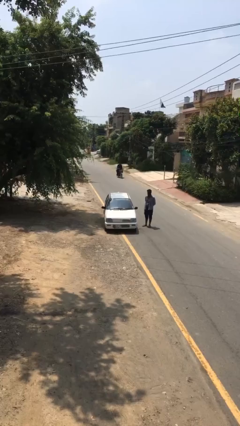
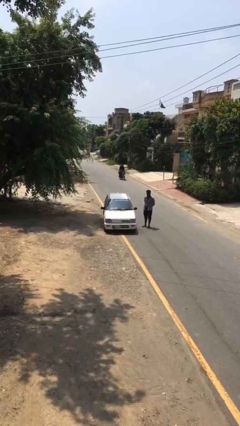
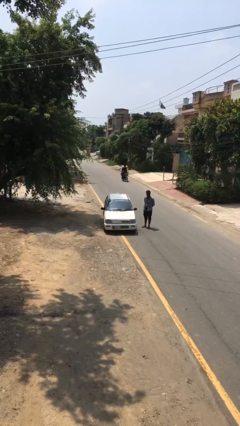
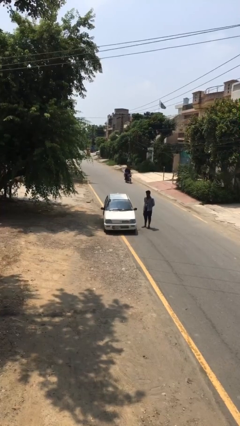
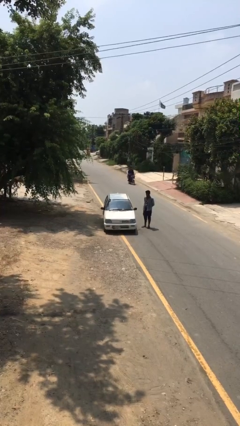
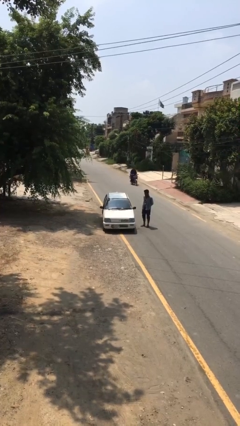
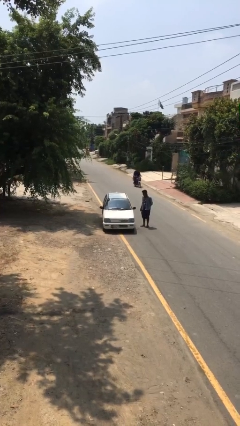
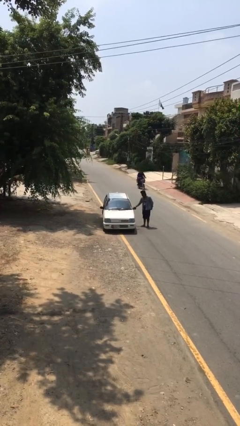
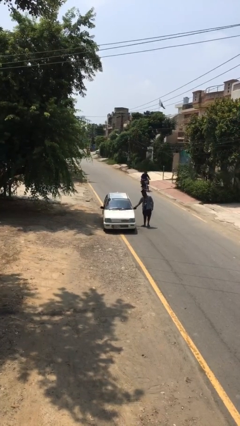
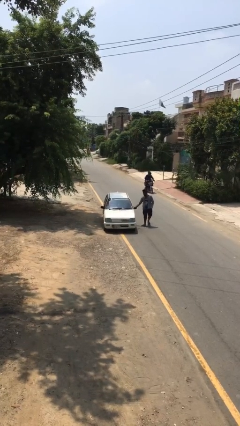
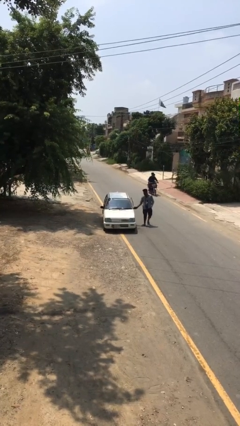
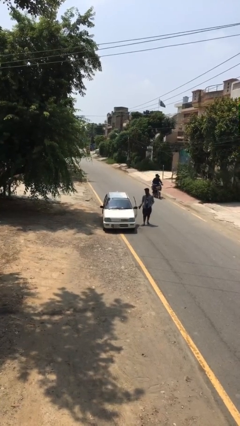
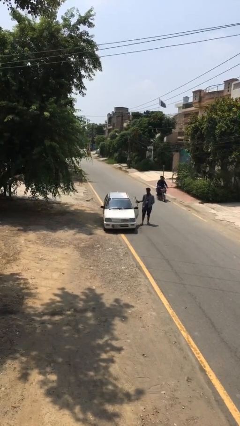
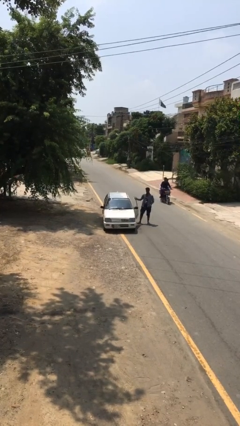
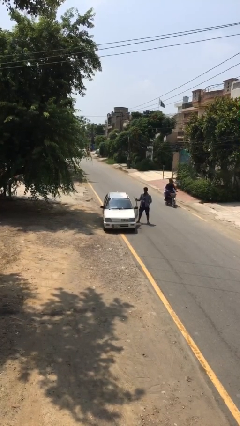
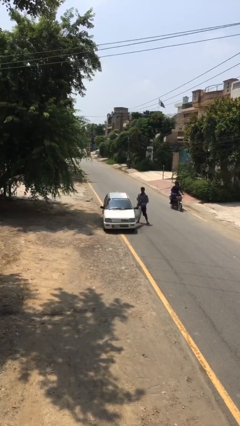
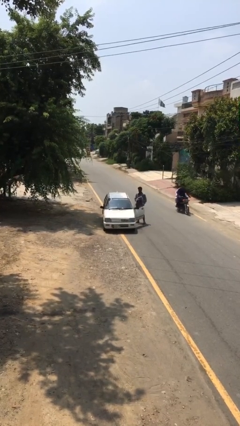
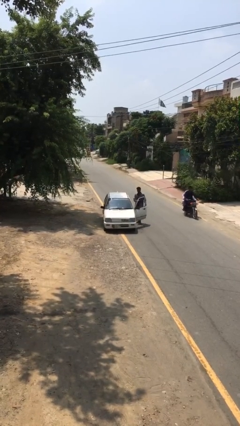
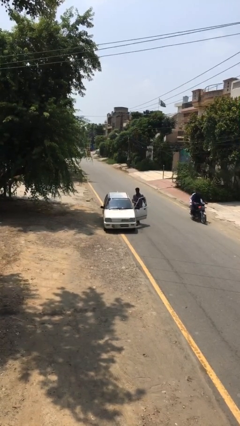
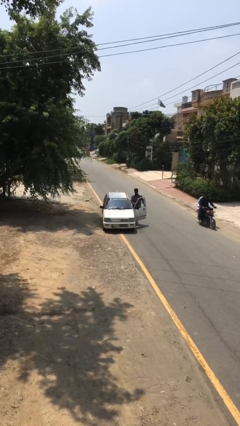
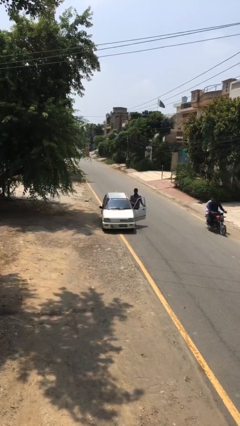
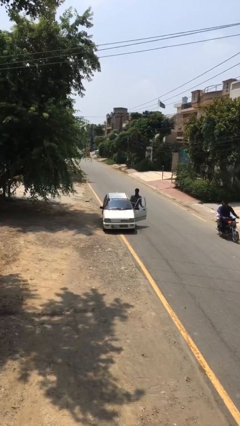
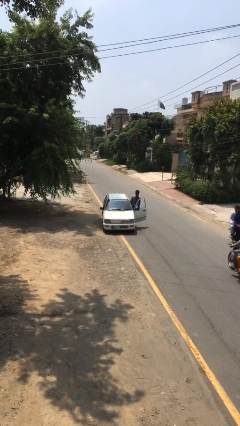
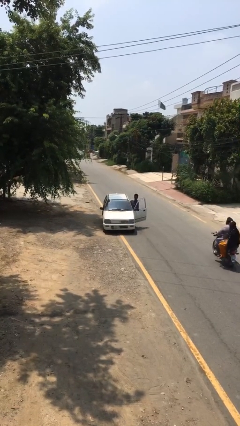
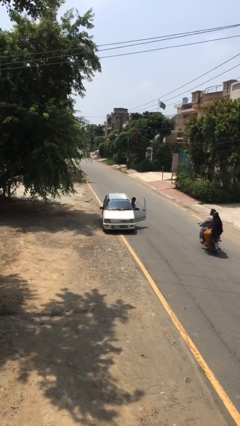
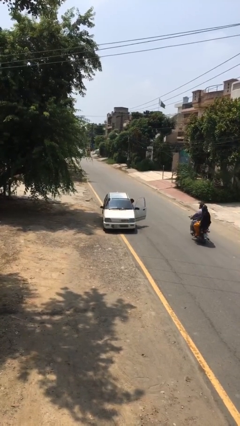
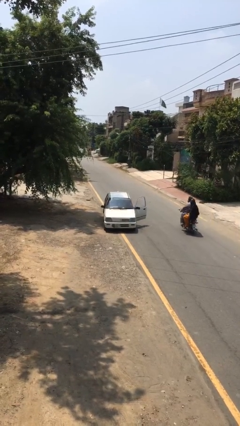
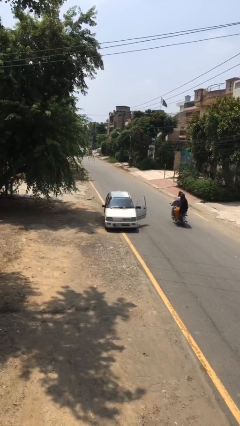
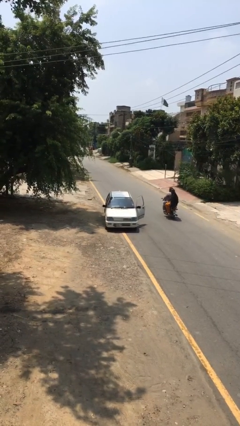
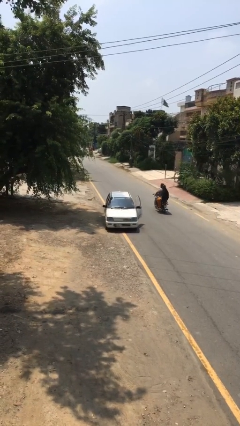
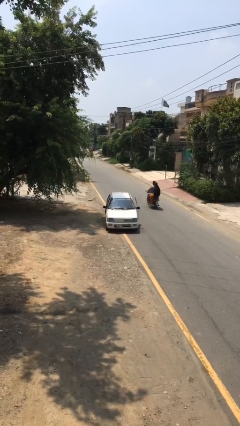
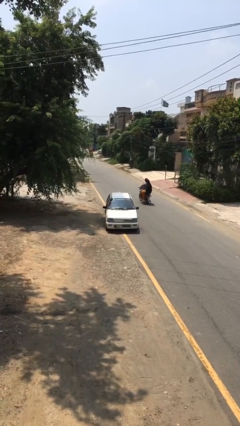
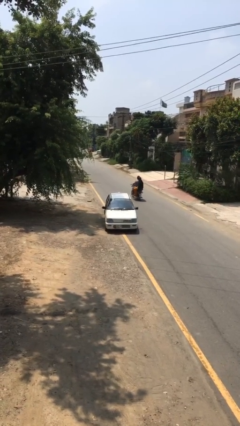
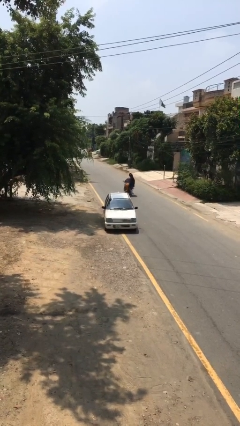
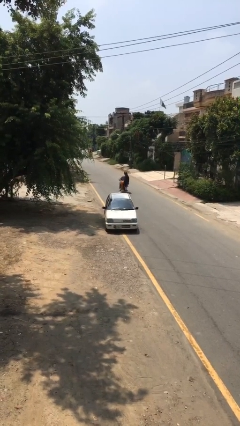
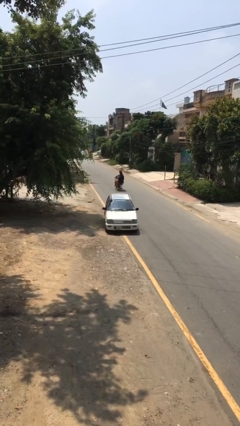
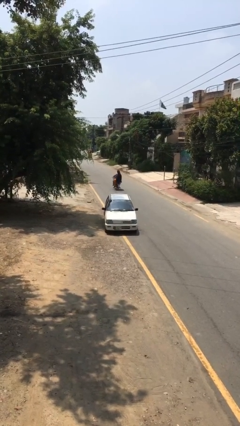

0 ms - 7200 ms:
car picks up person

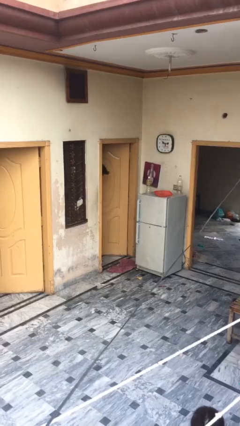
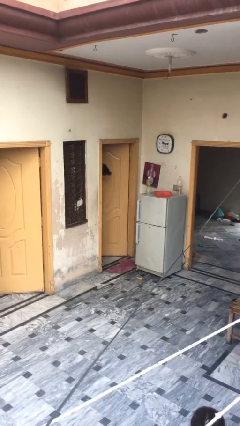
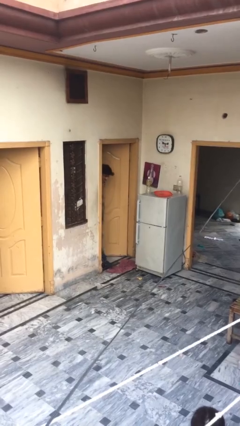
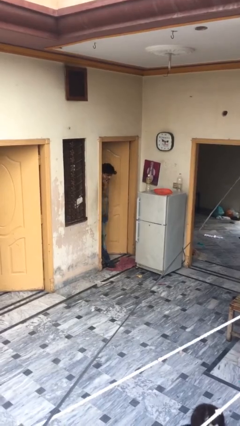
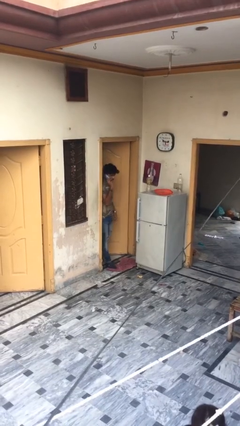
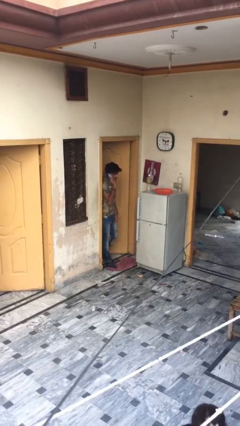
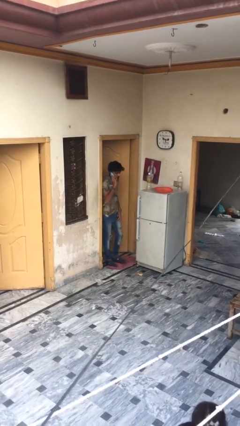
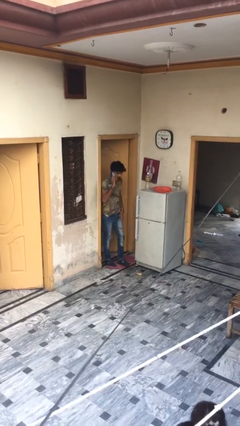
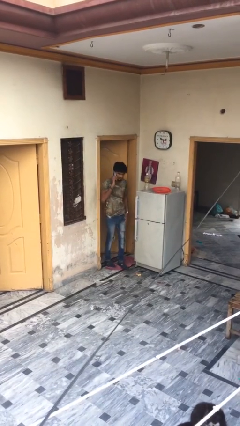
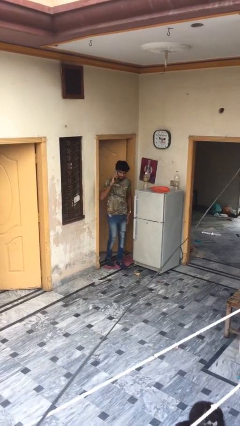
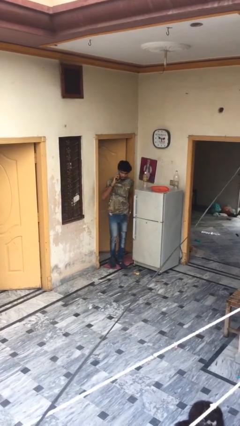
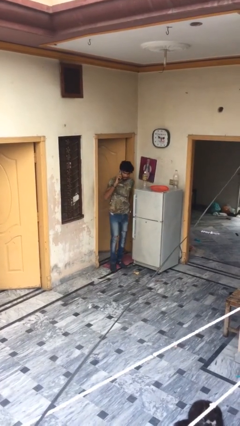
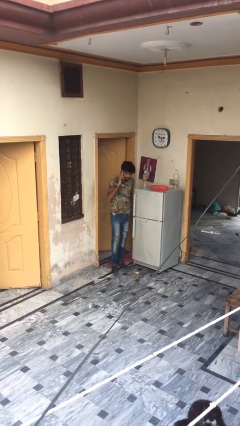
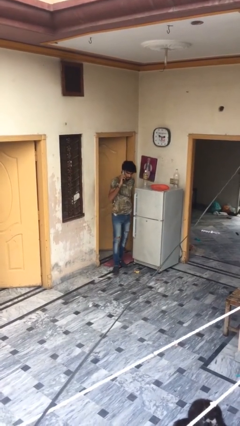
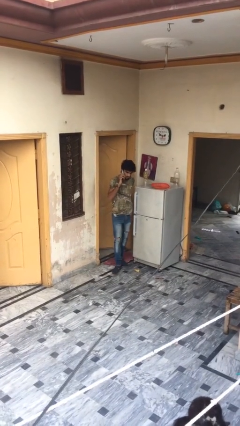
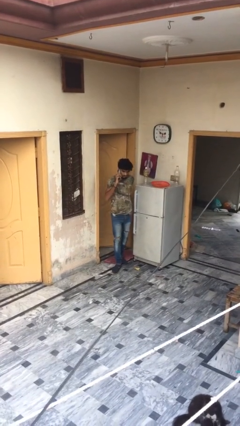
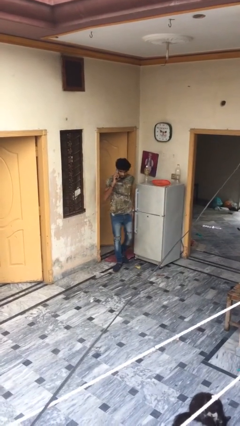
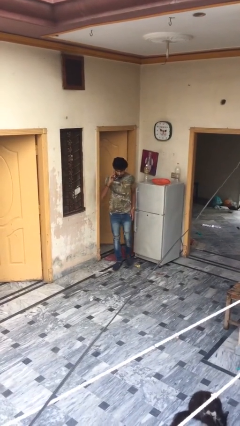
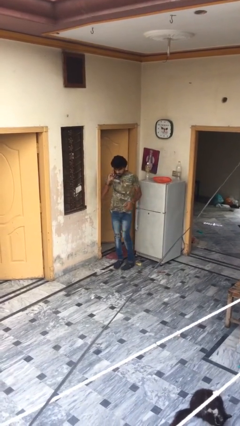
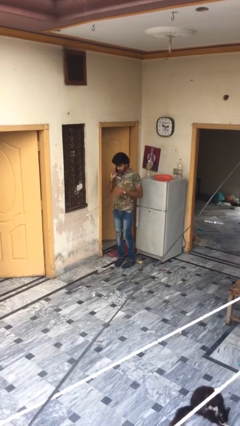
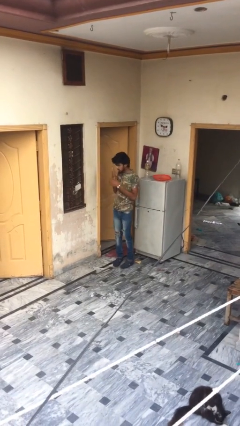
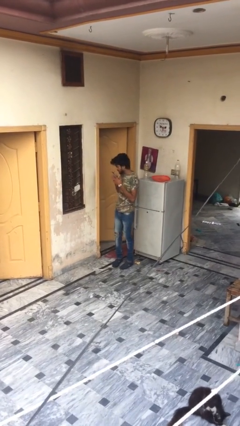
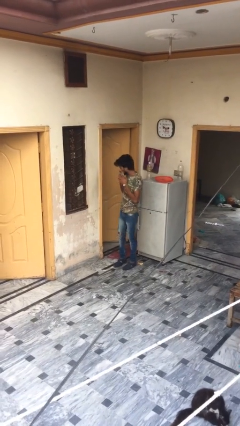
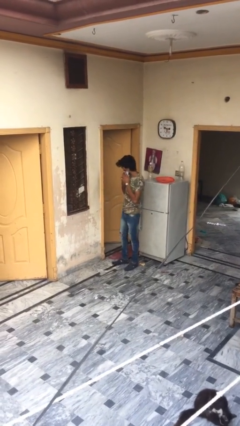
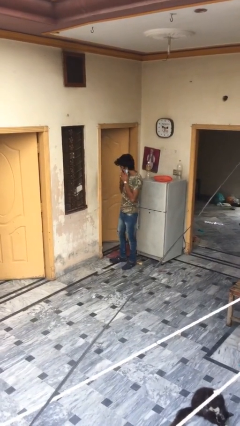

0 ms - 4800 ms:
person enters scene through structure

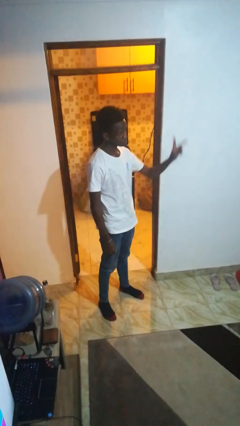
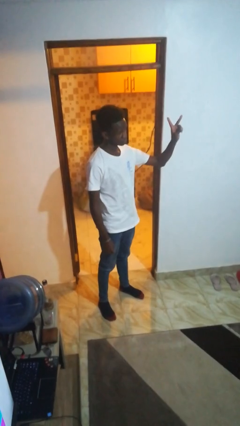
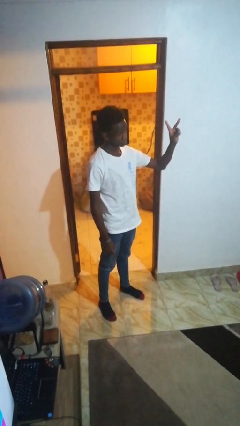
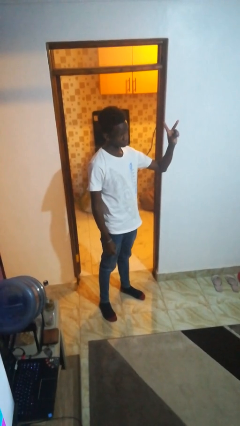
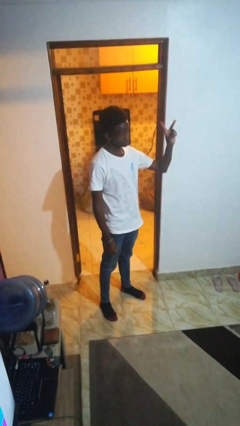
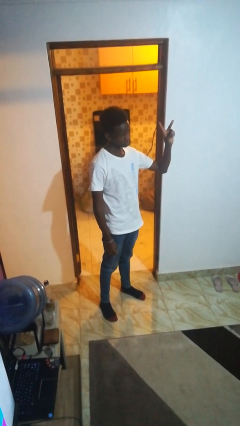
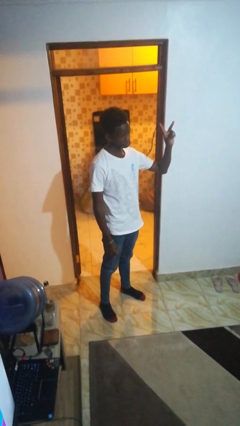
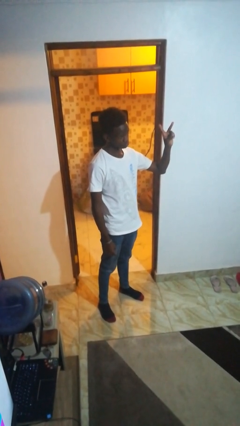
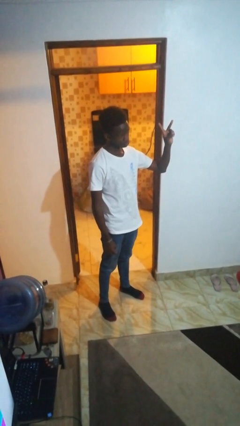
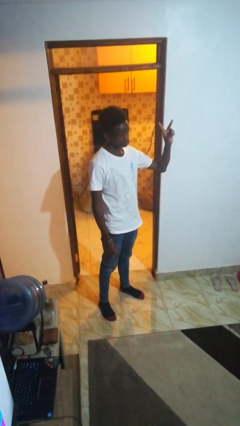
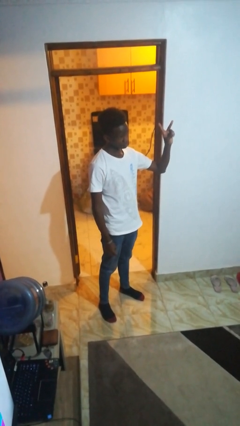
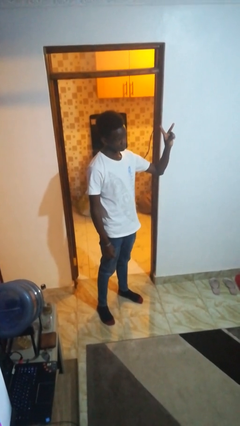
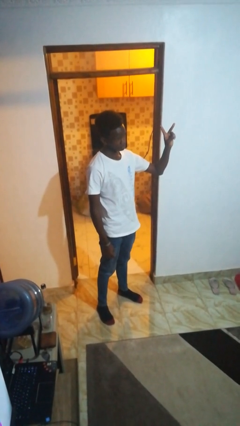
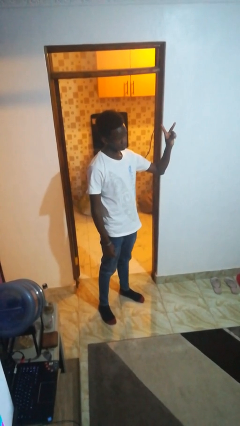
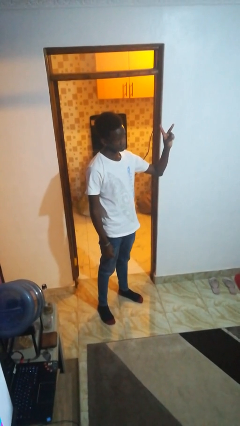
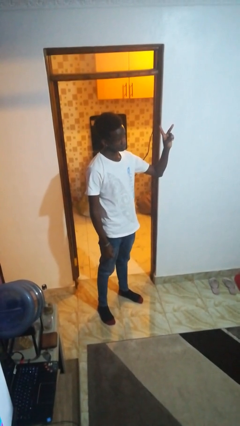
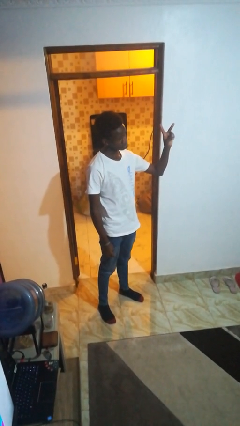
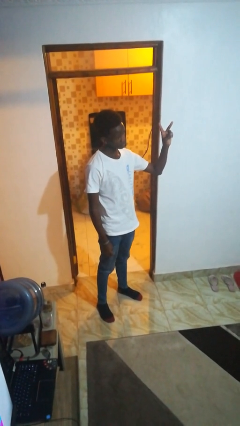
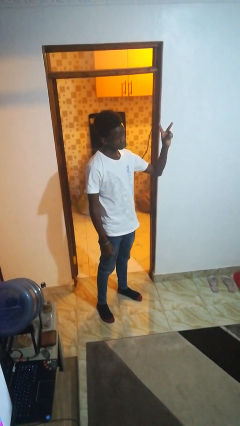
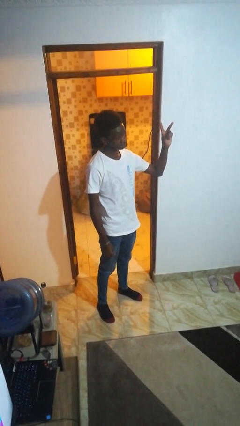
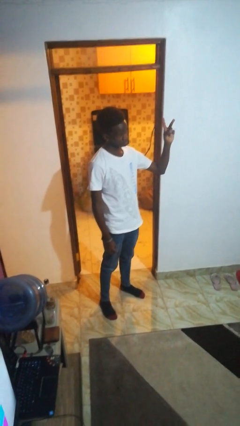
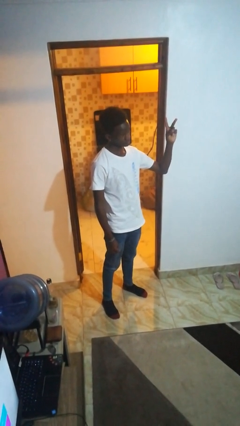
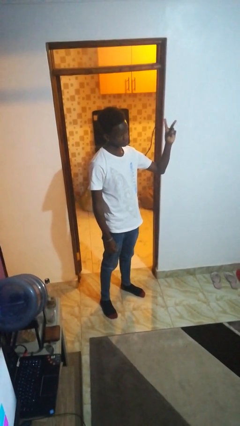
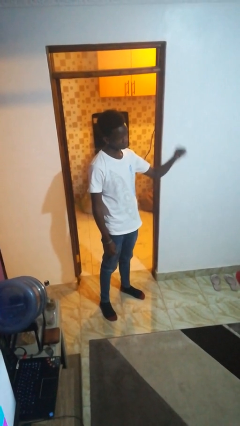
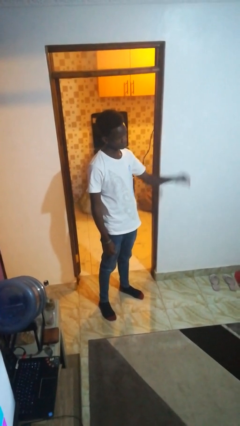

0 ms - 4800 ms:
person gestures peace

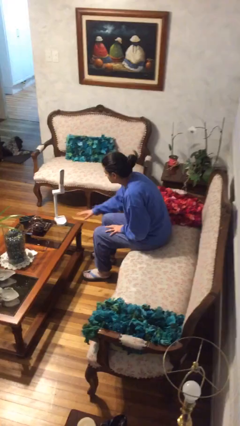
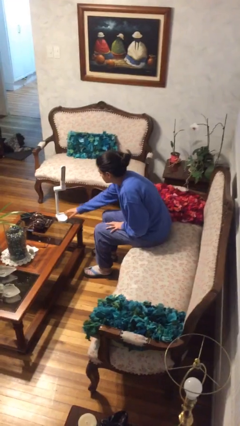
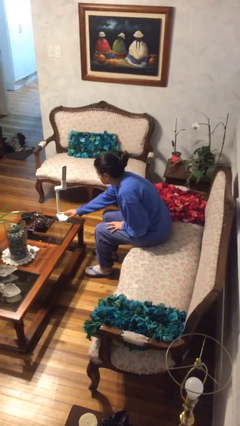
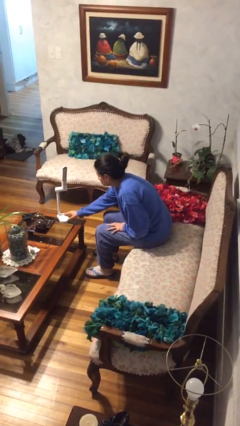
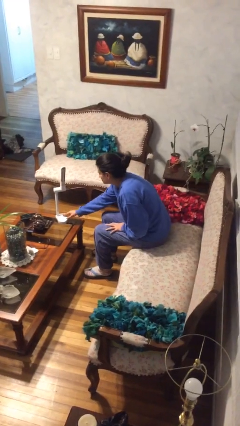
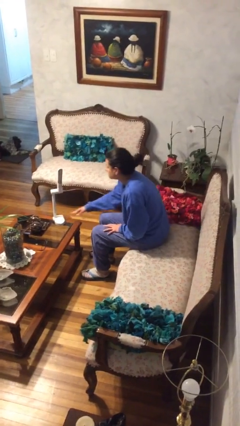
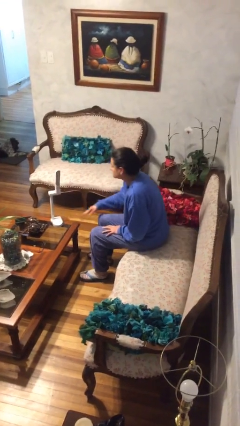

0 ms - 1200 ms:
person turns on lamp
